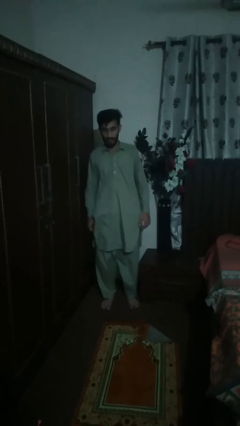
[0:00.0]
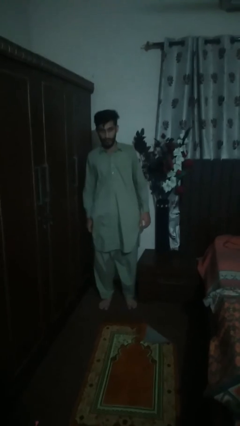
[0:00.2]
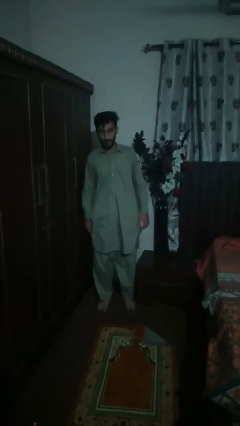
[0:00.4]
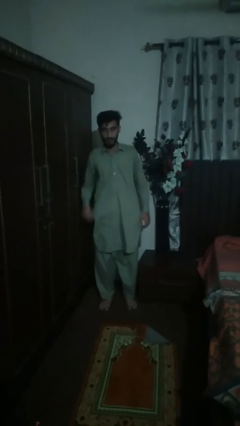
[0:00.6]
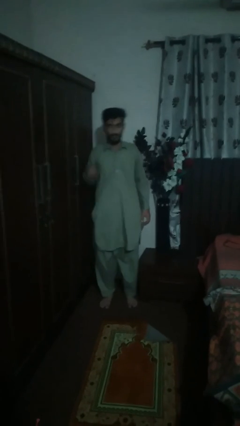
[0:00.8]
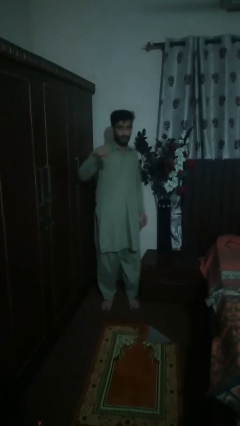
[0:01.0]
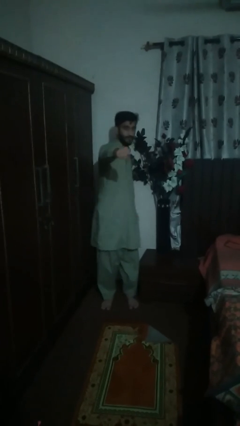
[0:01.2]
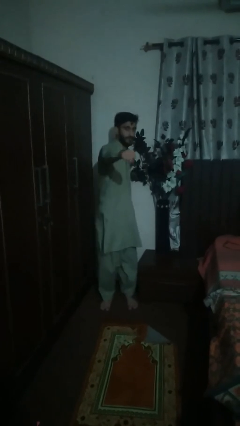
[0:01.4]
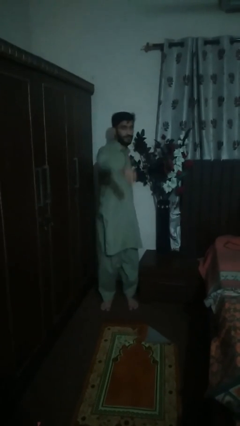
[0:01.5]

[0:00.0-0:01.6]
person karate chop

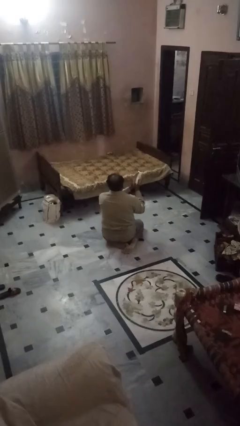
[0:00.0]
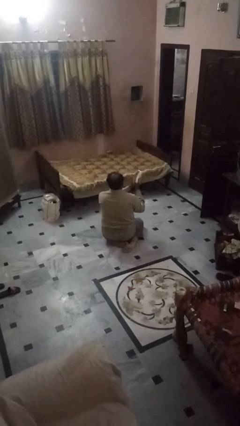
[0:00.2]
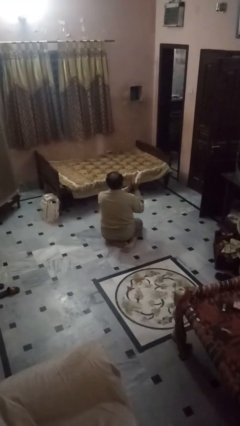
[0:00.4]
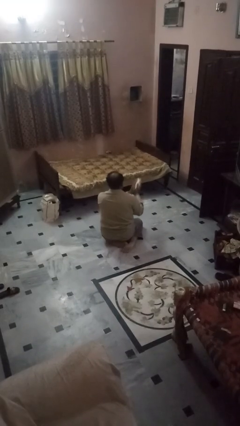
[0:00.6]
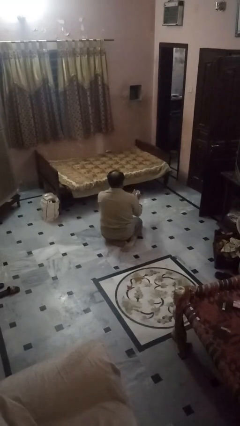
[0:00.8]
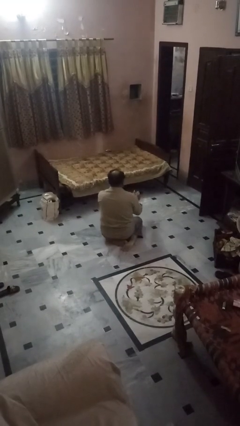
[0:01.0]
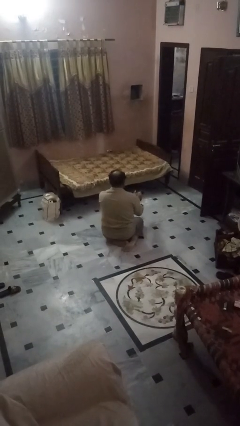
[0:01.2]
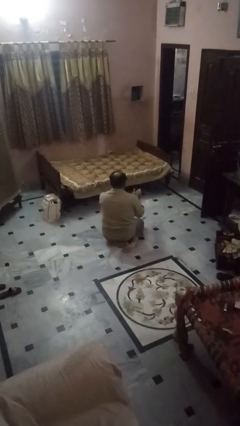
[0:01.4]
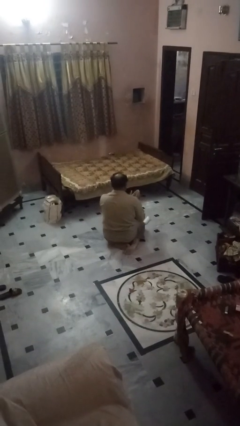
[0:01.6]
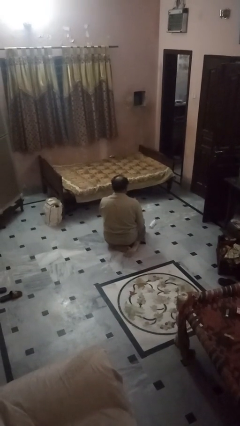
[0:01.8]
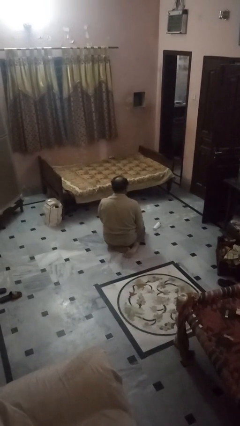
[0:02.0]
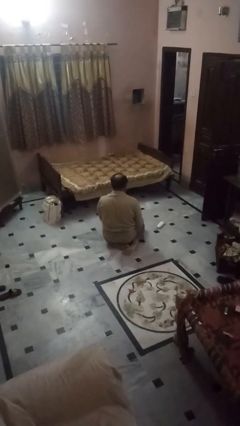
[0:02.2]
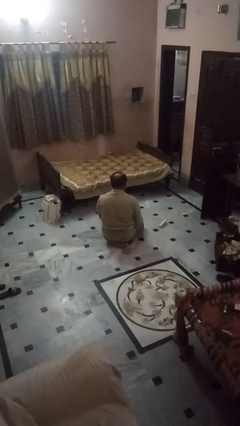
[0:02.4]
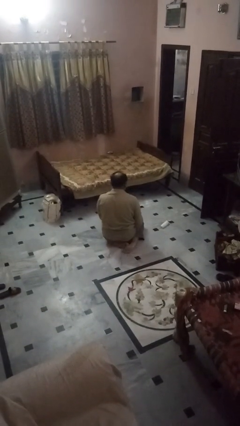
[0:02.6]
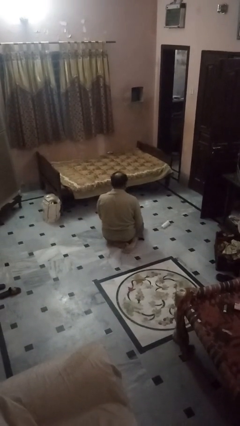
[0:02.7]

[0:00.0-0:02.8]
person catches dropped object

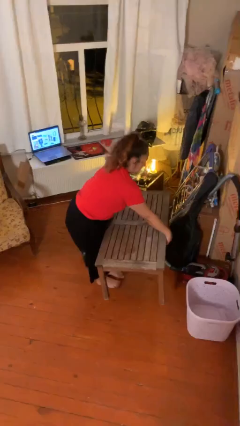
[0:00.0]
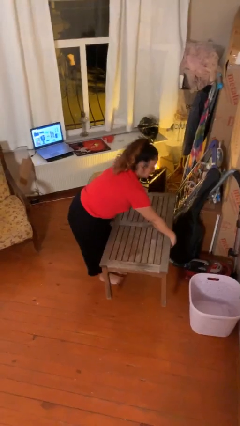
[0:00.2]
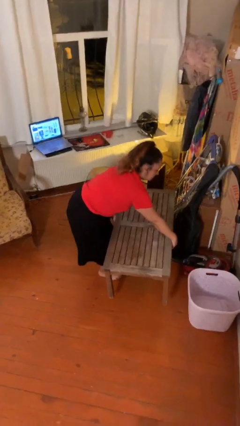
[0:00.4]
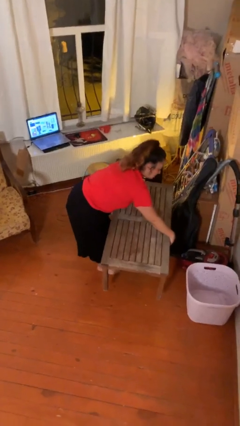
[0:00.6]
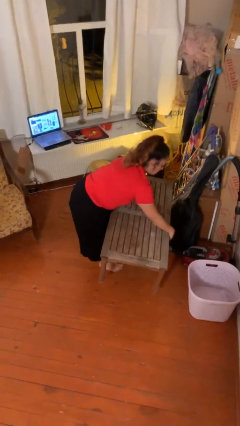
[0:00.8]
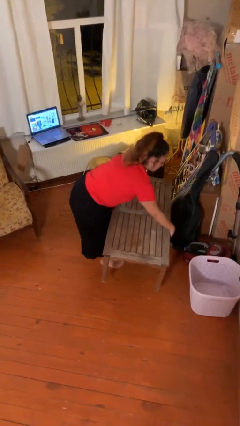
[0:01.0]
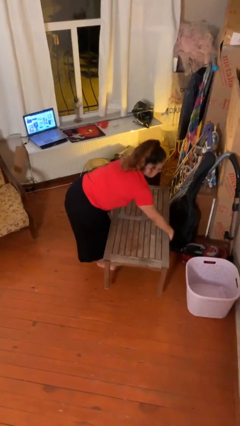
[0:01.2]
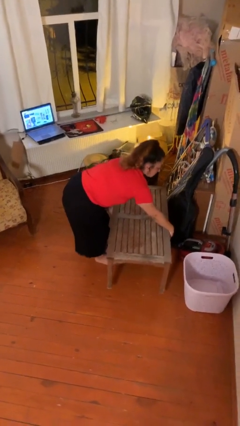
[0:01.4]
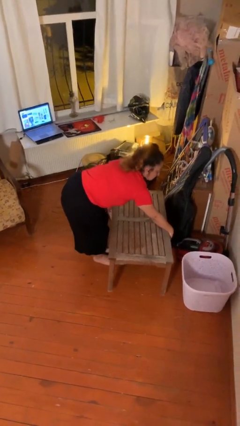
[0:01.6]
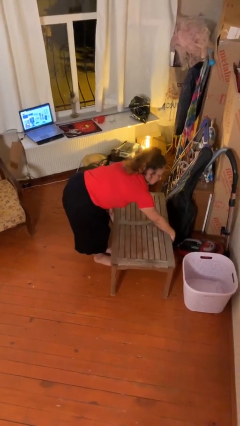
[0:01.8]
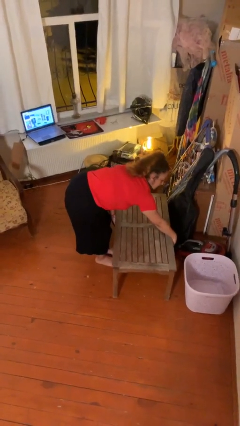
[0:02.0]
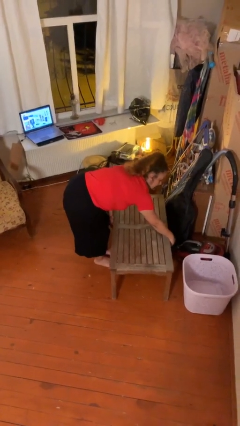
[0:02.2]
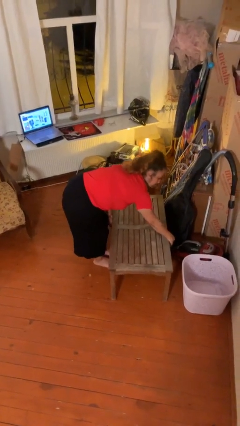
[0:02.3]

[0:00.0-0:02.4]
person puts down object on floor

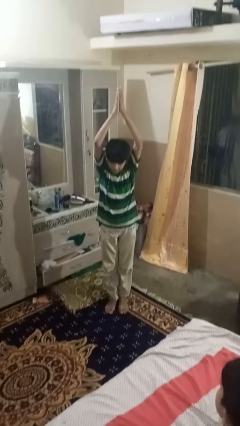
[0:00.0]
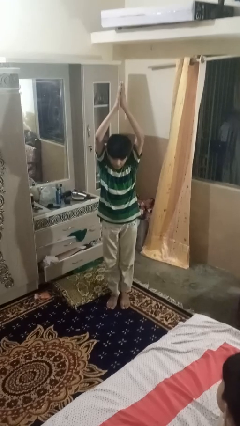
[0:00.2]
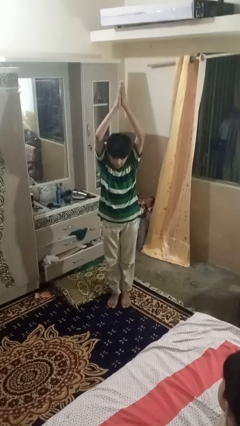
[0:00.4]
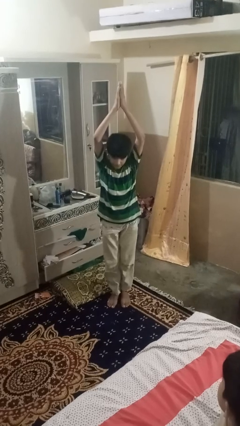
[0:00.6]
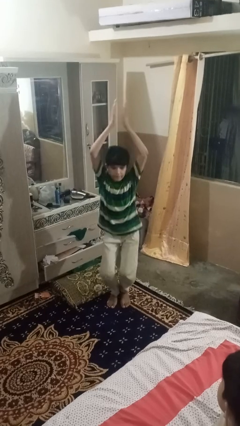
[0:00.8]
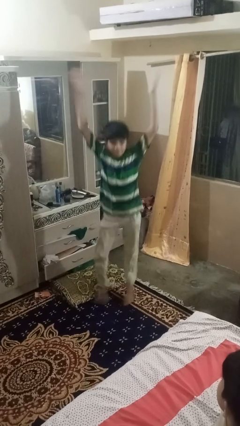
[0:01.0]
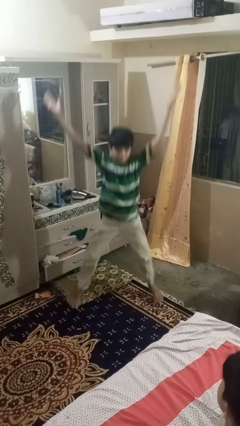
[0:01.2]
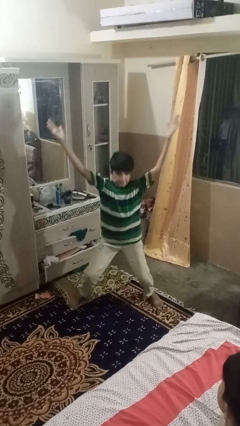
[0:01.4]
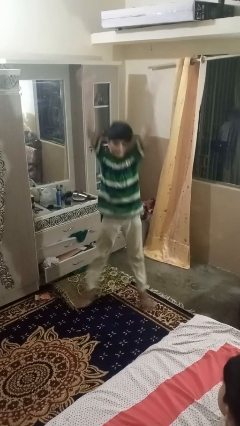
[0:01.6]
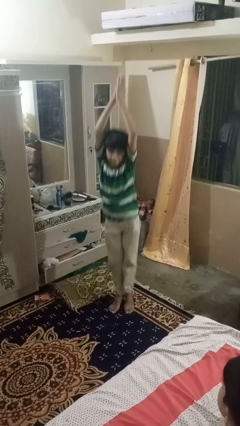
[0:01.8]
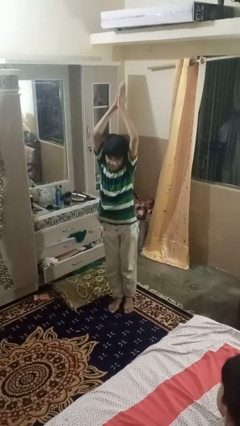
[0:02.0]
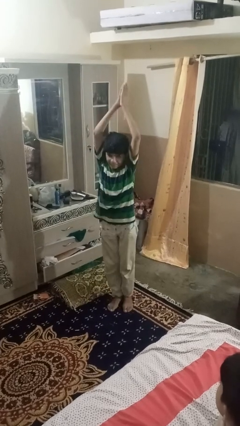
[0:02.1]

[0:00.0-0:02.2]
person exercises with jumping jacks

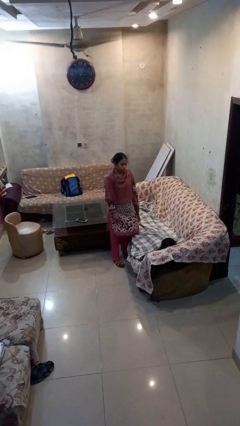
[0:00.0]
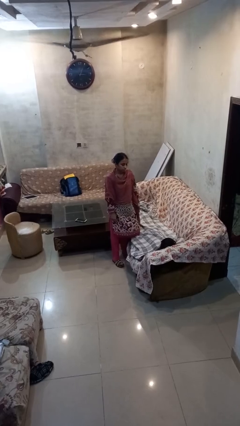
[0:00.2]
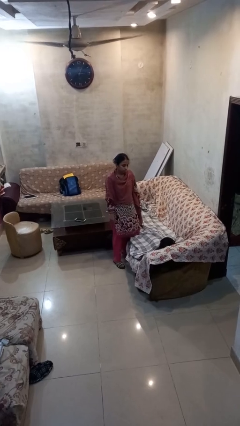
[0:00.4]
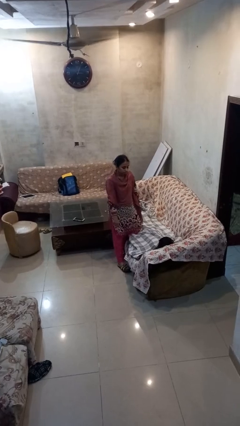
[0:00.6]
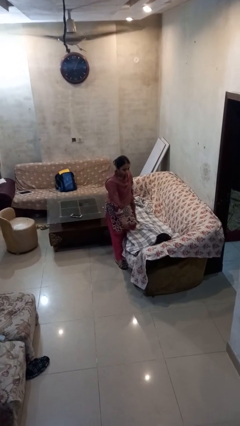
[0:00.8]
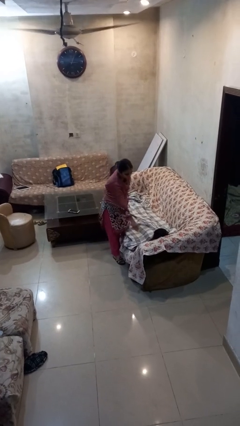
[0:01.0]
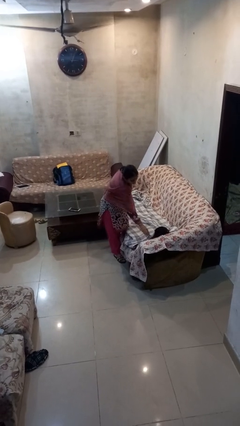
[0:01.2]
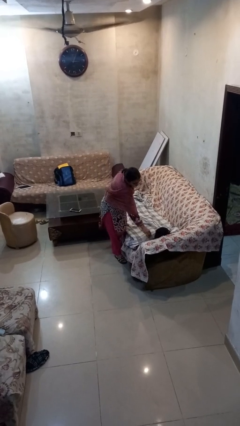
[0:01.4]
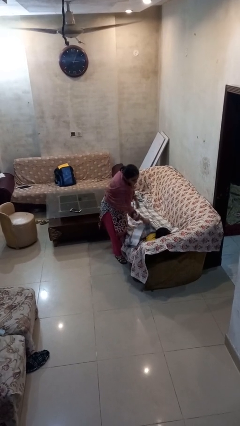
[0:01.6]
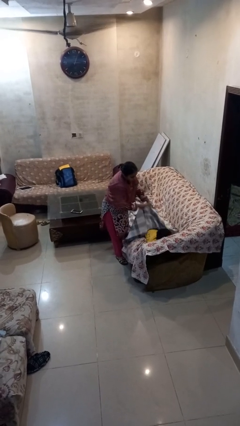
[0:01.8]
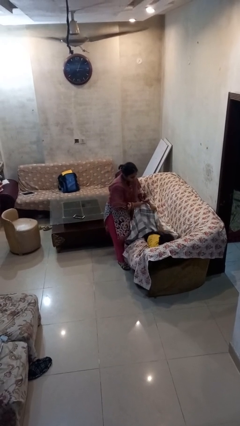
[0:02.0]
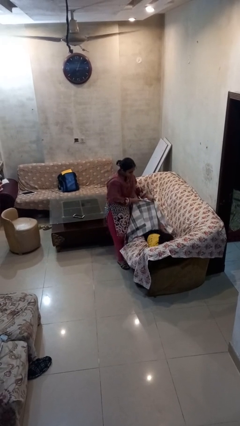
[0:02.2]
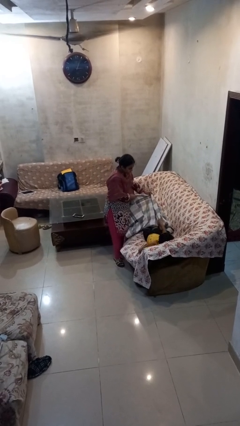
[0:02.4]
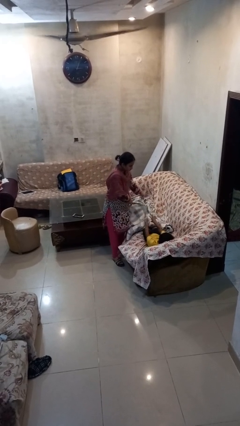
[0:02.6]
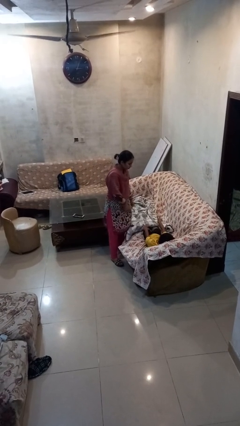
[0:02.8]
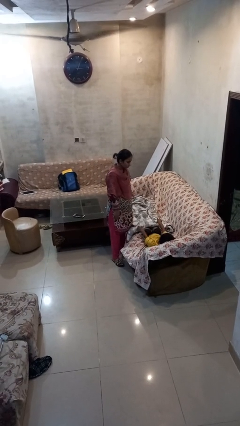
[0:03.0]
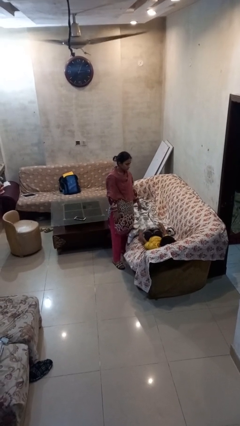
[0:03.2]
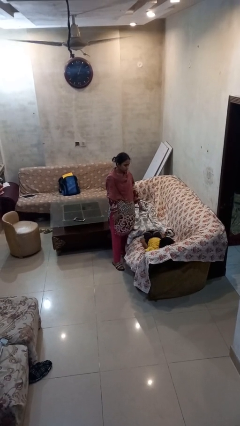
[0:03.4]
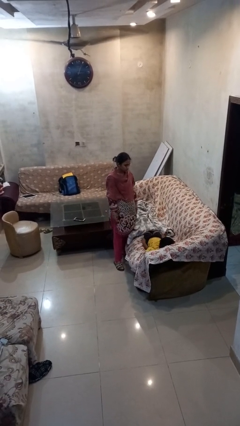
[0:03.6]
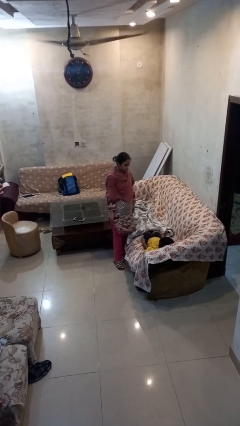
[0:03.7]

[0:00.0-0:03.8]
person uncovers friend with blanket

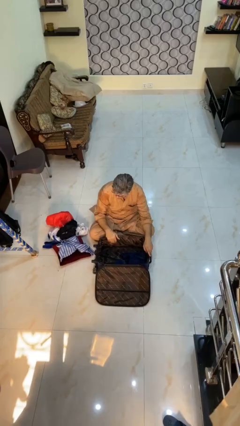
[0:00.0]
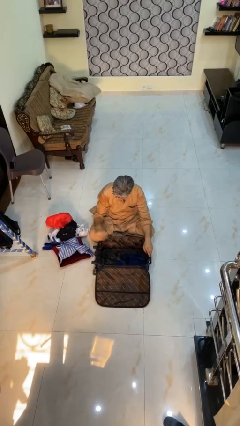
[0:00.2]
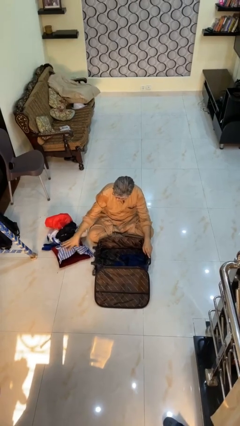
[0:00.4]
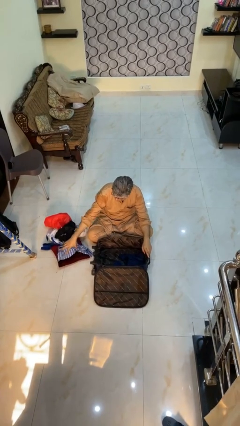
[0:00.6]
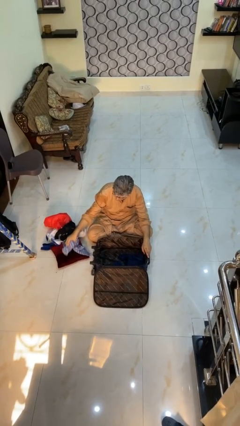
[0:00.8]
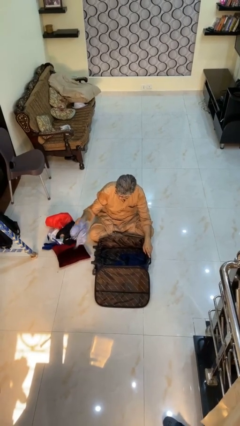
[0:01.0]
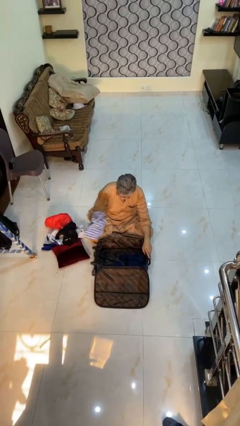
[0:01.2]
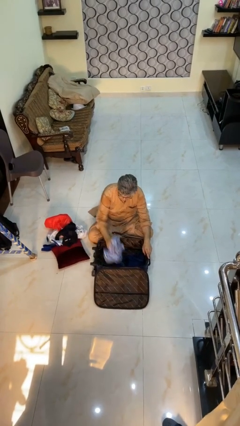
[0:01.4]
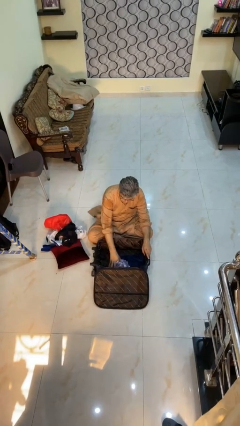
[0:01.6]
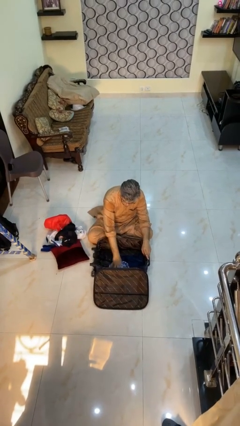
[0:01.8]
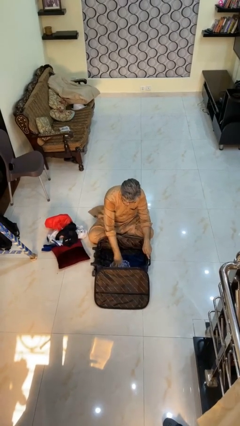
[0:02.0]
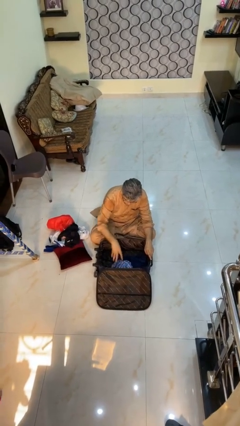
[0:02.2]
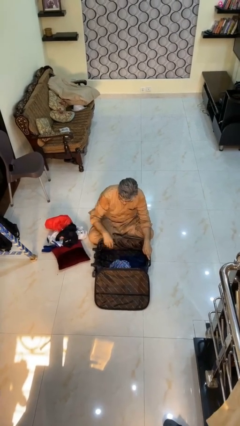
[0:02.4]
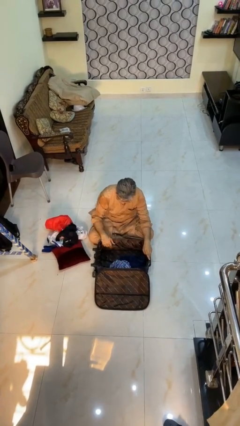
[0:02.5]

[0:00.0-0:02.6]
person loads clothes into suitcase

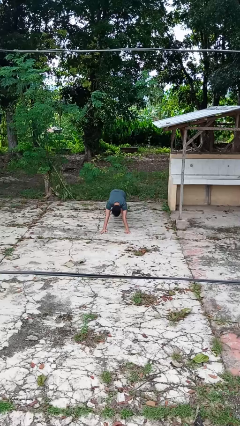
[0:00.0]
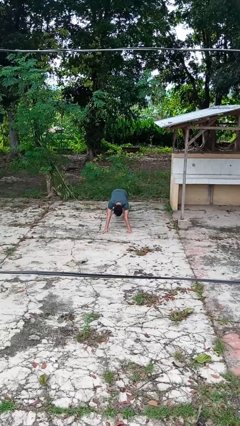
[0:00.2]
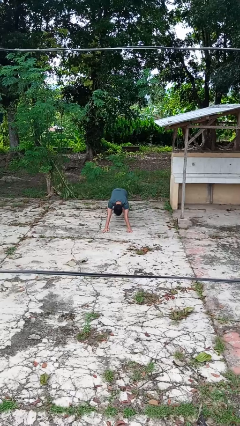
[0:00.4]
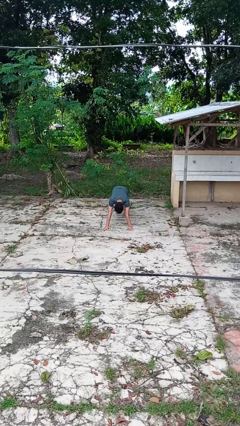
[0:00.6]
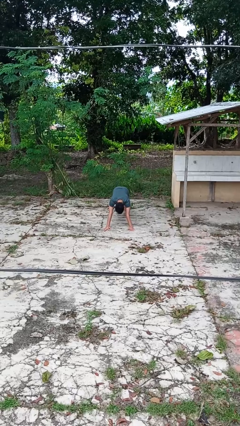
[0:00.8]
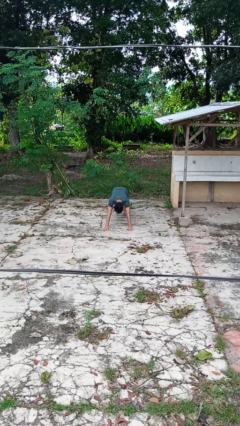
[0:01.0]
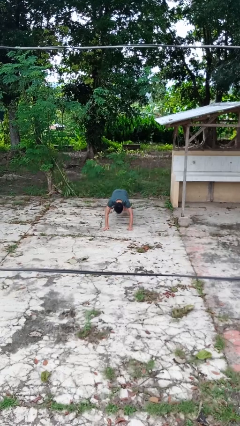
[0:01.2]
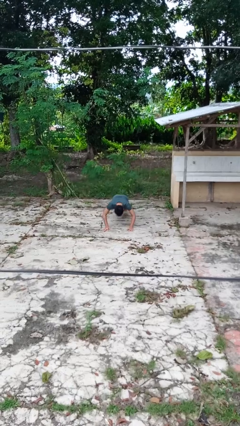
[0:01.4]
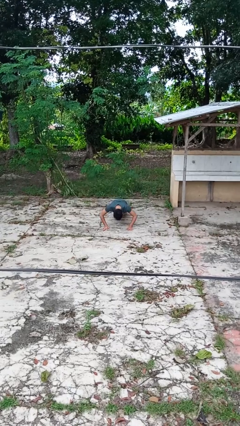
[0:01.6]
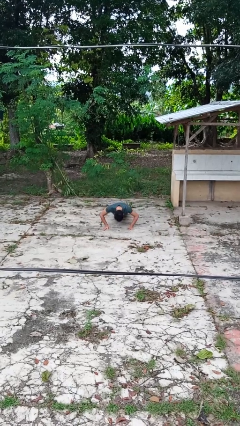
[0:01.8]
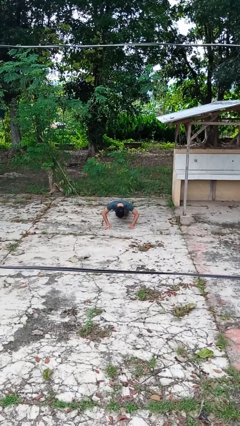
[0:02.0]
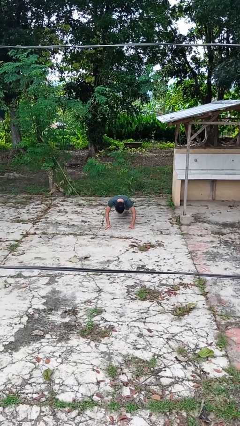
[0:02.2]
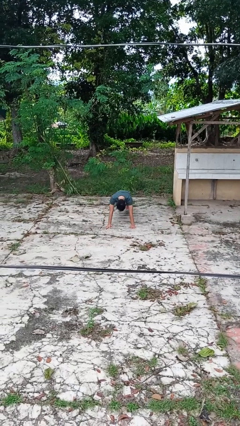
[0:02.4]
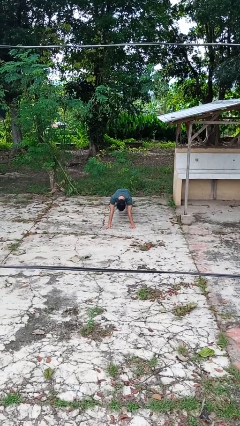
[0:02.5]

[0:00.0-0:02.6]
person exercises with pushup
